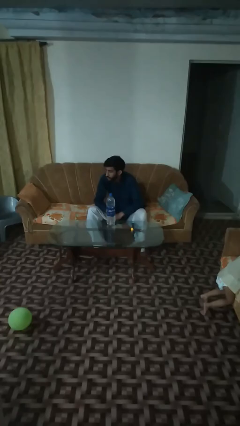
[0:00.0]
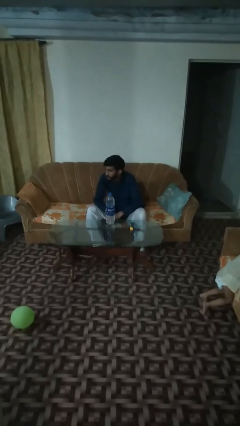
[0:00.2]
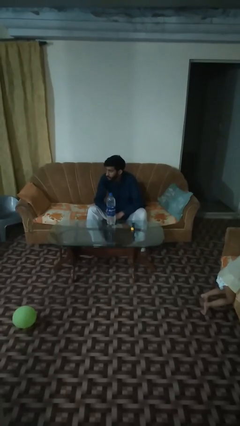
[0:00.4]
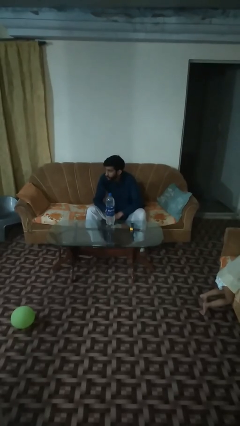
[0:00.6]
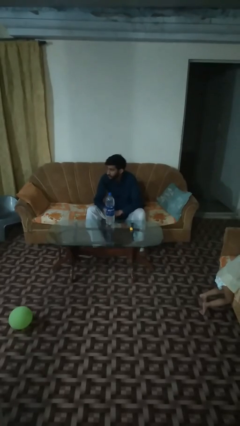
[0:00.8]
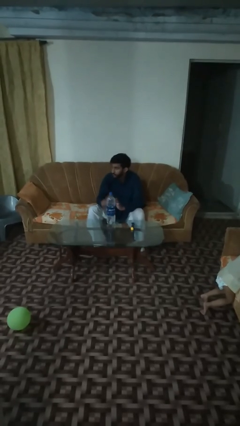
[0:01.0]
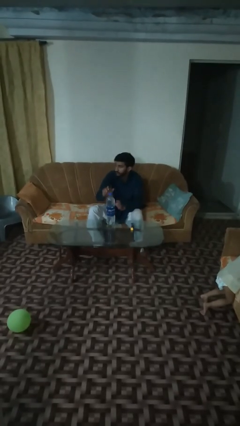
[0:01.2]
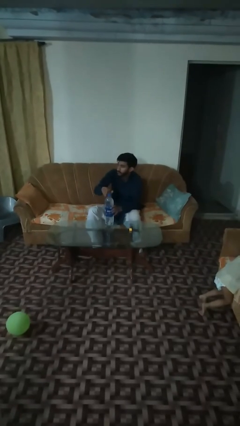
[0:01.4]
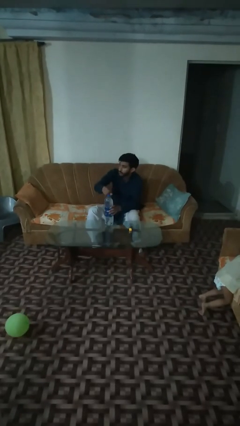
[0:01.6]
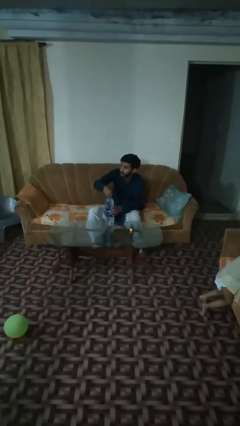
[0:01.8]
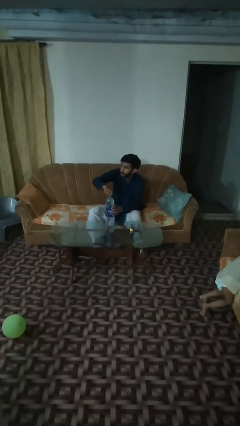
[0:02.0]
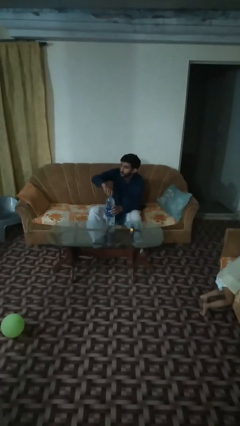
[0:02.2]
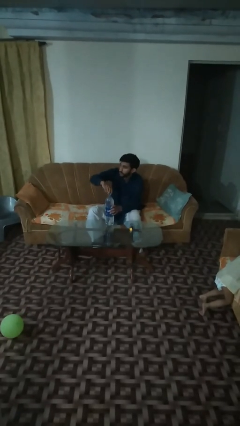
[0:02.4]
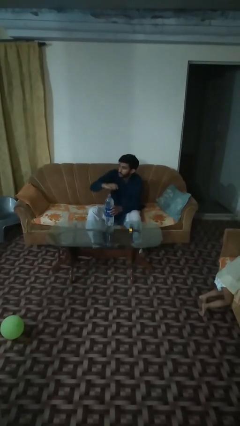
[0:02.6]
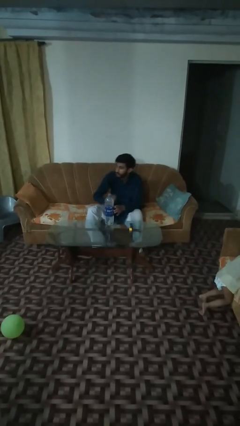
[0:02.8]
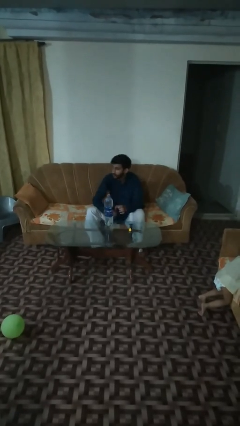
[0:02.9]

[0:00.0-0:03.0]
person unscrews lid from bottle

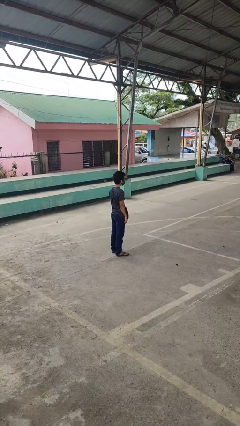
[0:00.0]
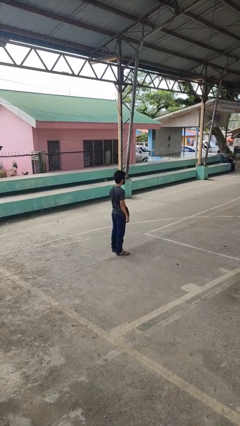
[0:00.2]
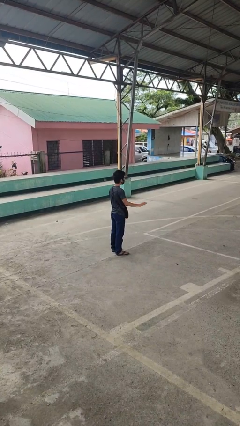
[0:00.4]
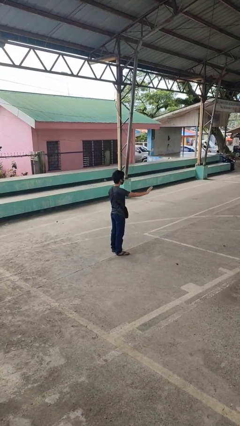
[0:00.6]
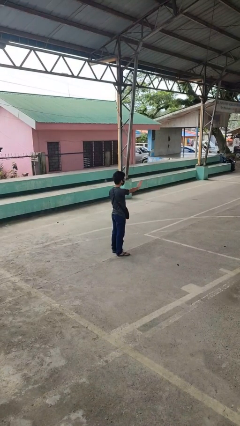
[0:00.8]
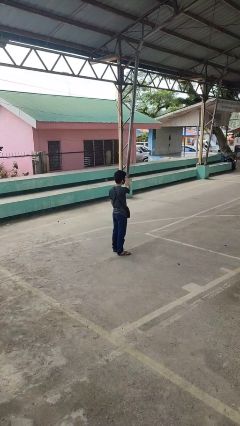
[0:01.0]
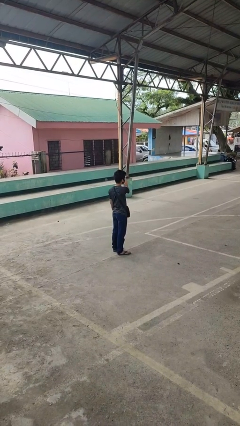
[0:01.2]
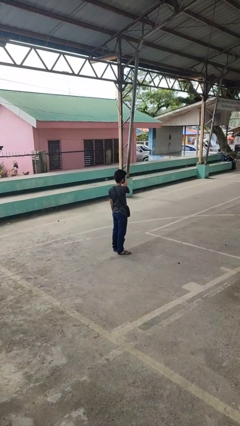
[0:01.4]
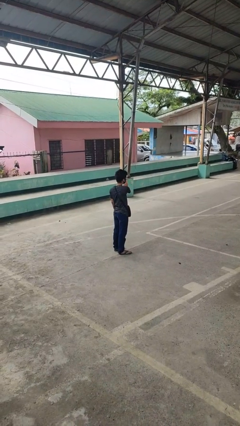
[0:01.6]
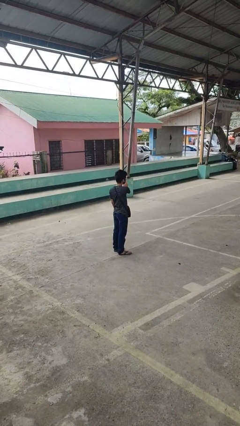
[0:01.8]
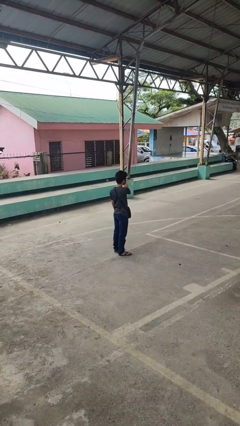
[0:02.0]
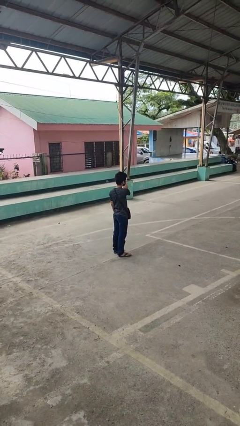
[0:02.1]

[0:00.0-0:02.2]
person gestures swipe left

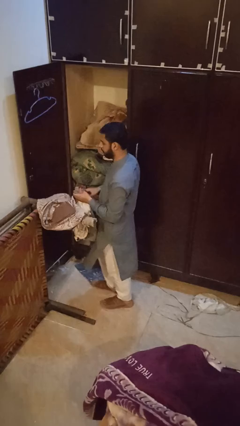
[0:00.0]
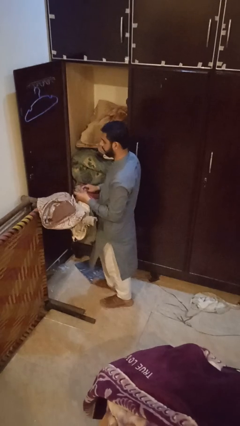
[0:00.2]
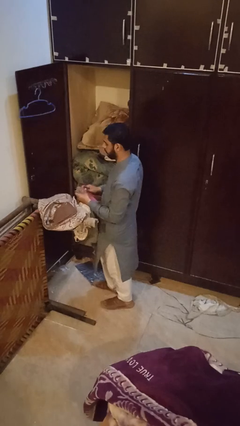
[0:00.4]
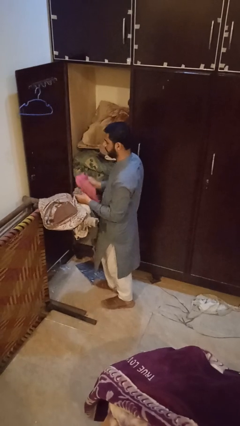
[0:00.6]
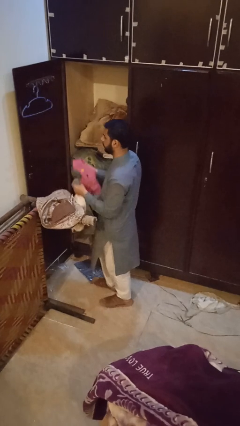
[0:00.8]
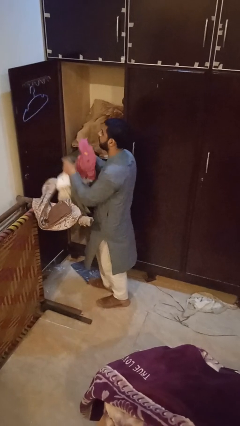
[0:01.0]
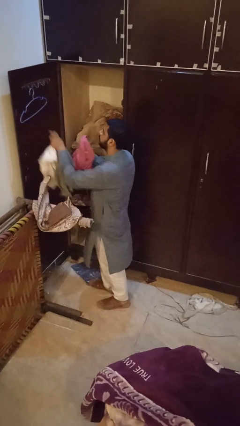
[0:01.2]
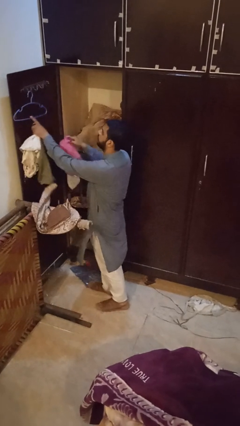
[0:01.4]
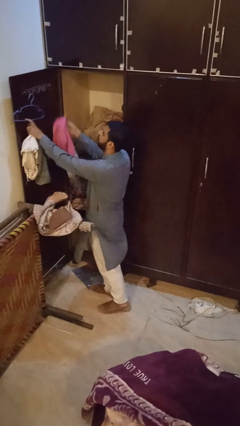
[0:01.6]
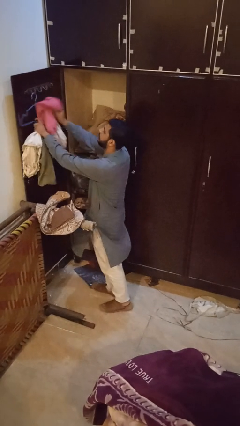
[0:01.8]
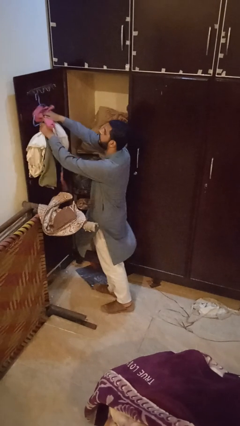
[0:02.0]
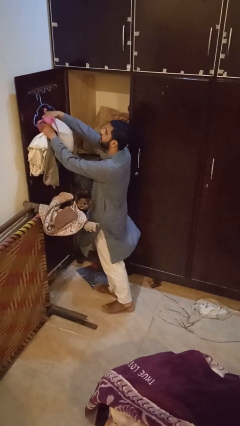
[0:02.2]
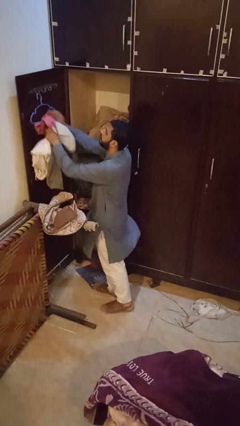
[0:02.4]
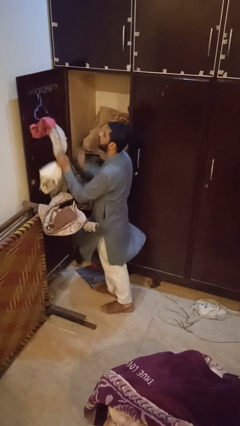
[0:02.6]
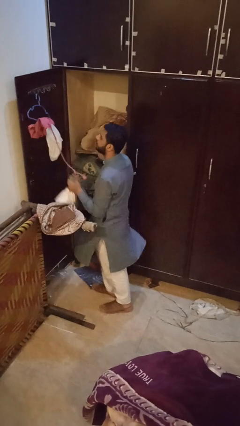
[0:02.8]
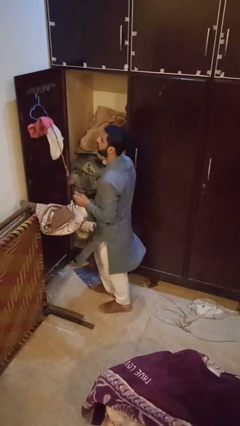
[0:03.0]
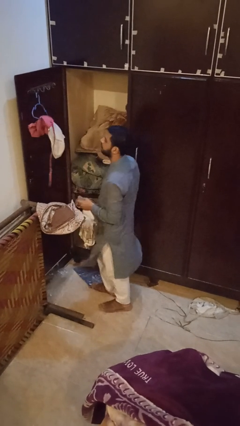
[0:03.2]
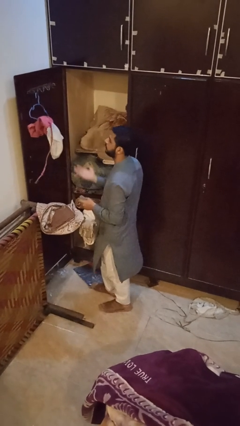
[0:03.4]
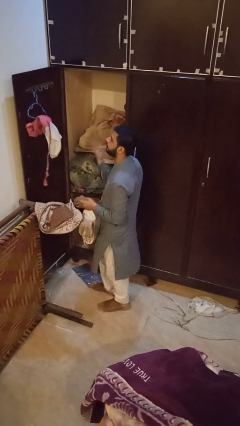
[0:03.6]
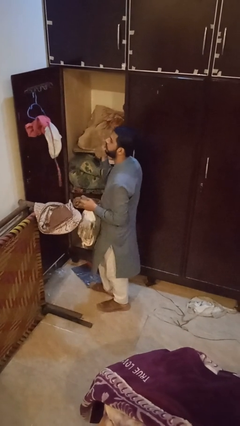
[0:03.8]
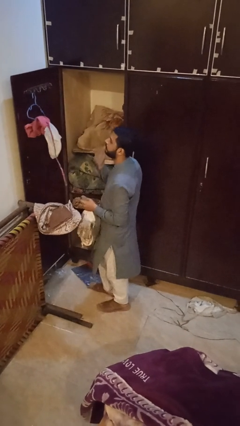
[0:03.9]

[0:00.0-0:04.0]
person puts clothes into closet

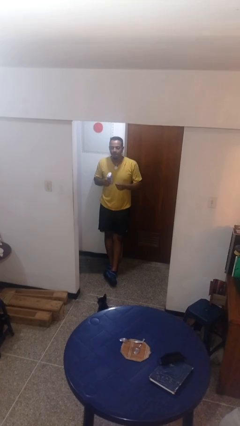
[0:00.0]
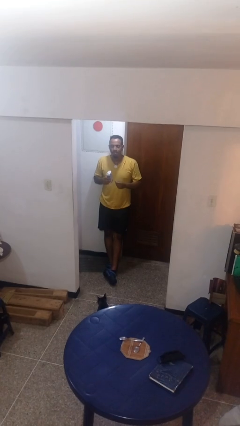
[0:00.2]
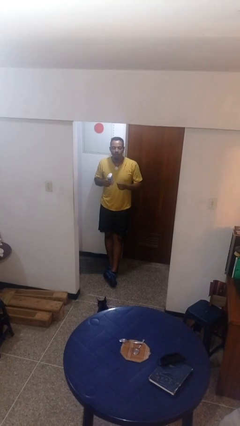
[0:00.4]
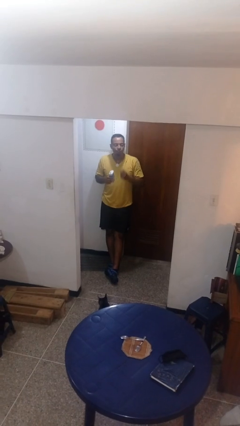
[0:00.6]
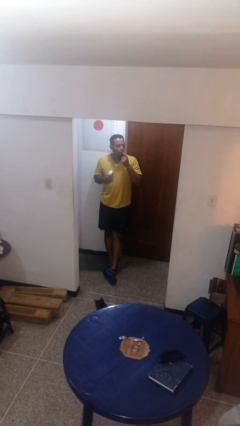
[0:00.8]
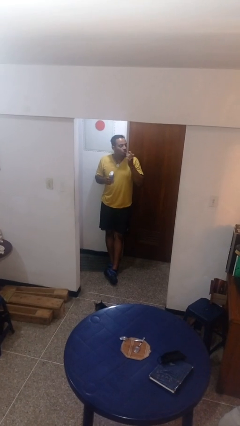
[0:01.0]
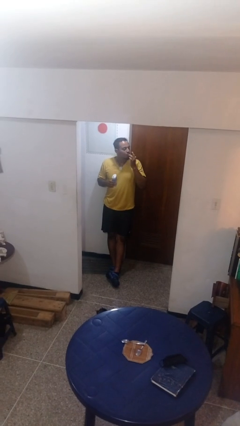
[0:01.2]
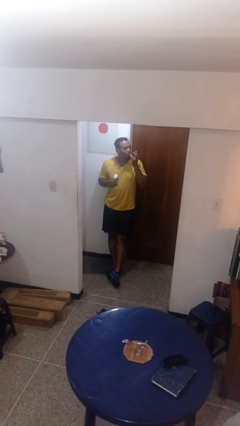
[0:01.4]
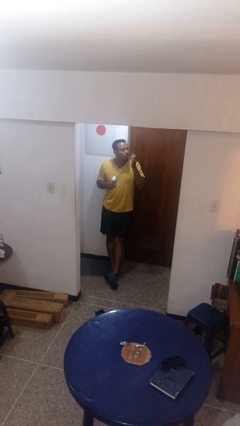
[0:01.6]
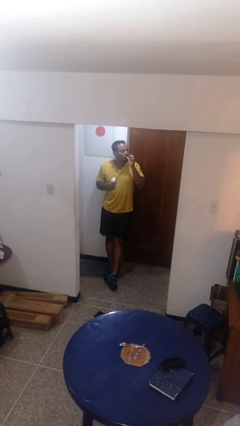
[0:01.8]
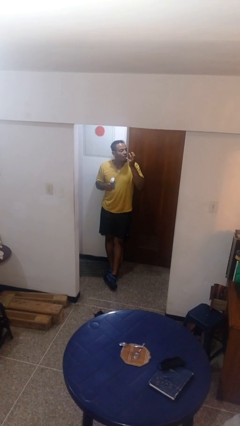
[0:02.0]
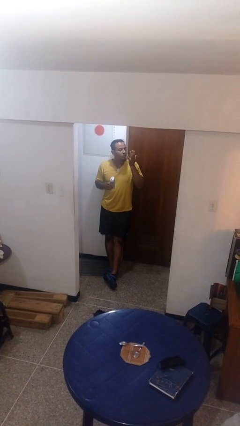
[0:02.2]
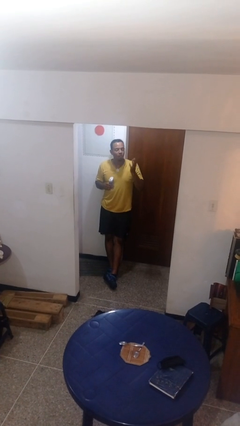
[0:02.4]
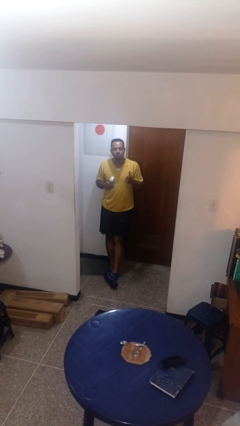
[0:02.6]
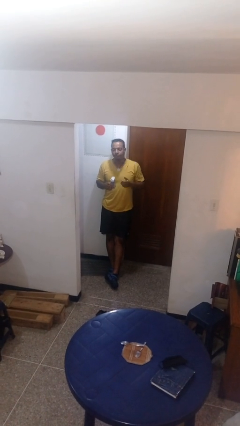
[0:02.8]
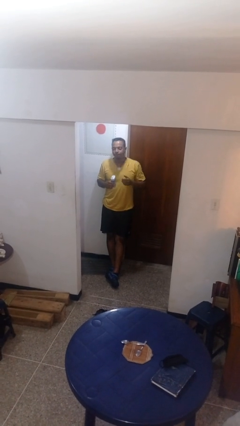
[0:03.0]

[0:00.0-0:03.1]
person licks fingers

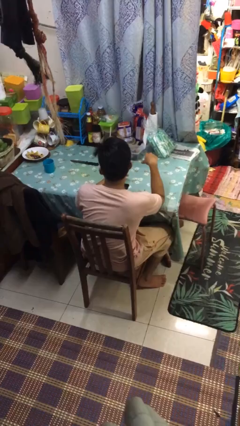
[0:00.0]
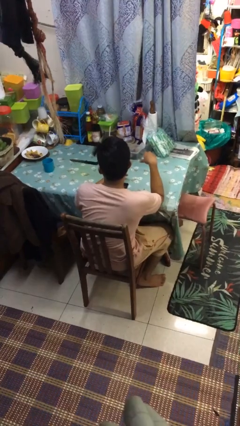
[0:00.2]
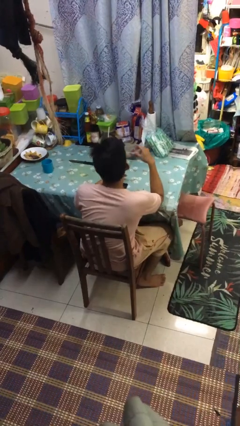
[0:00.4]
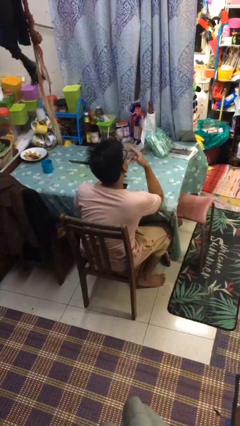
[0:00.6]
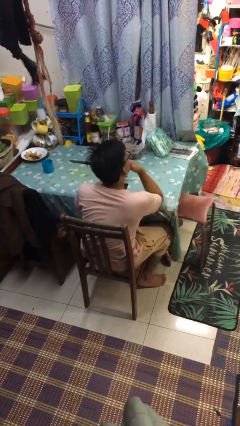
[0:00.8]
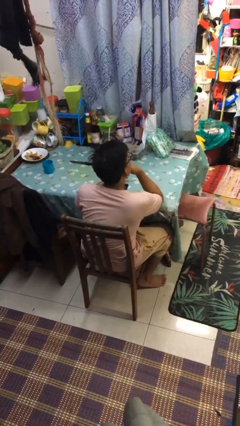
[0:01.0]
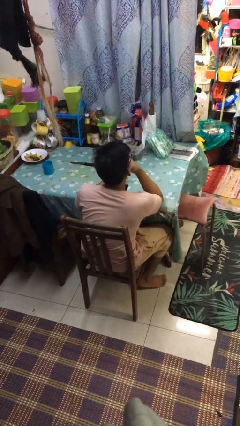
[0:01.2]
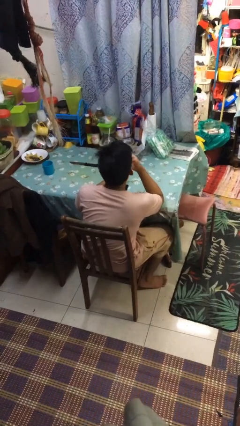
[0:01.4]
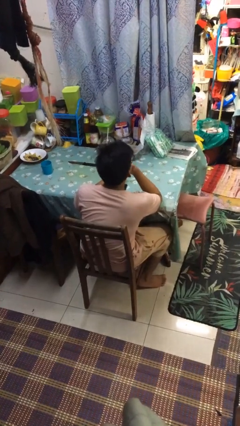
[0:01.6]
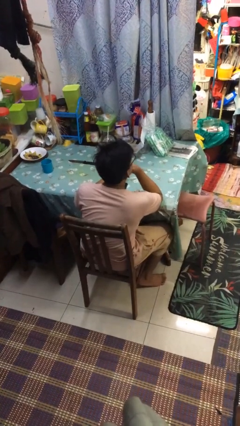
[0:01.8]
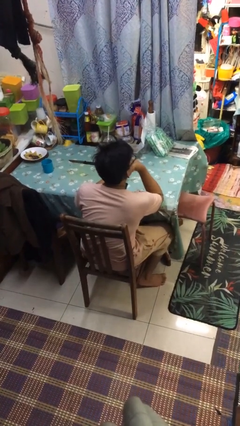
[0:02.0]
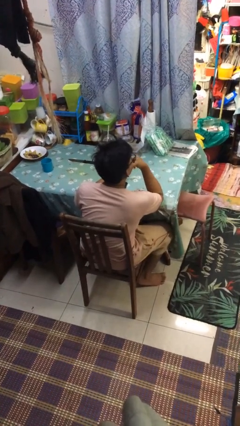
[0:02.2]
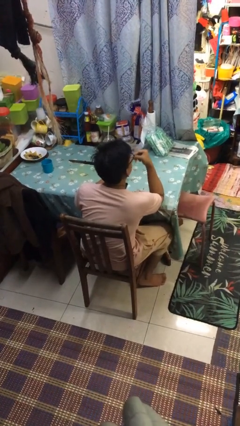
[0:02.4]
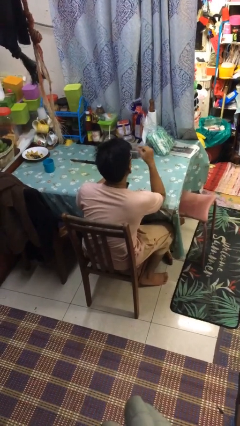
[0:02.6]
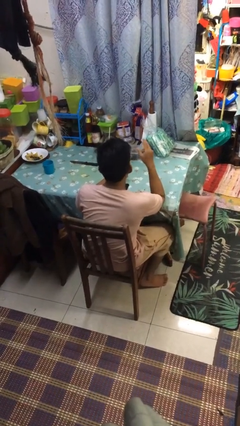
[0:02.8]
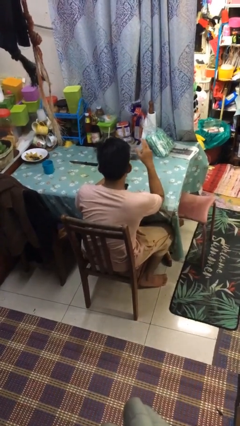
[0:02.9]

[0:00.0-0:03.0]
person strokes chin

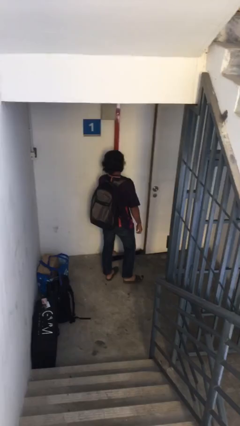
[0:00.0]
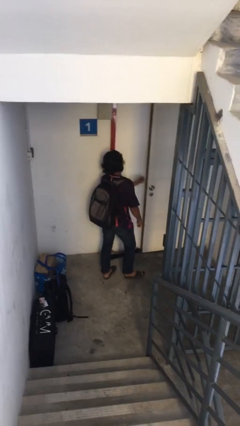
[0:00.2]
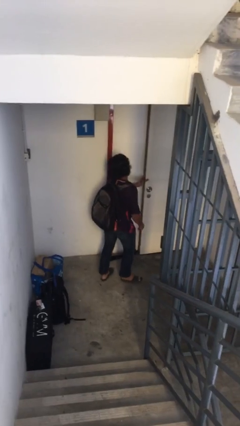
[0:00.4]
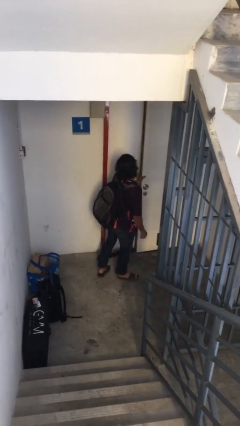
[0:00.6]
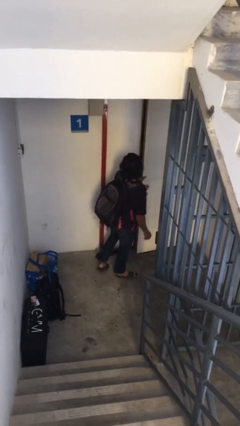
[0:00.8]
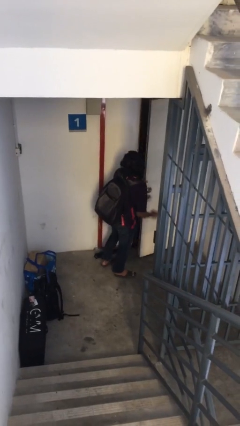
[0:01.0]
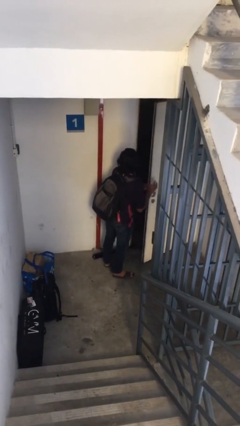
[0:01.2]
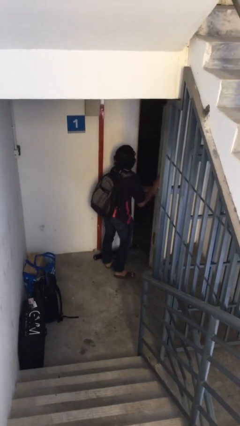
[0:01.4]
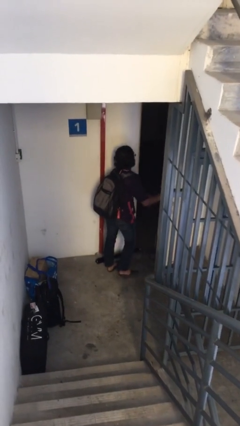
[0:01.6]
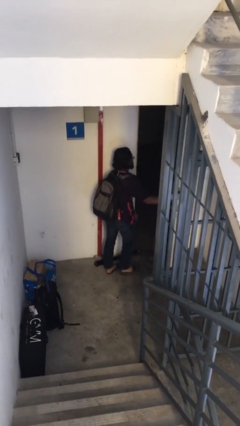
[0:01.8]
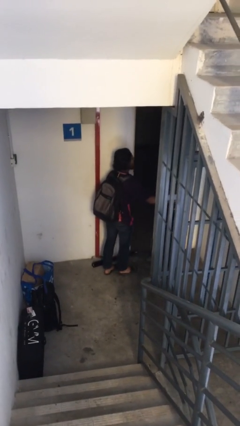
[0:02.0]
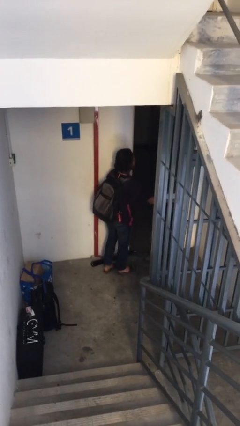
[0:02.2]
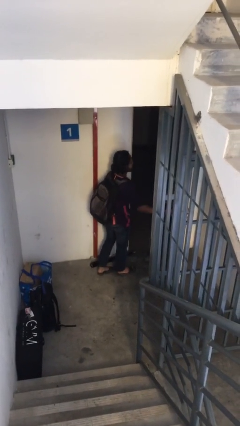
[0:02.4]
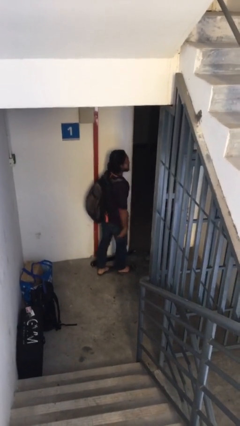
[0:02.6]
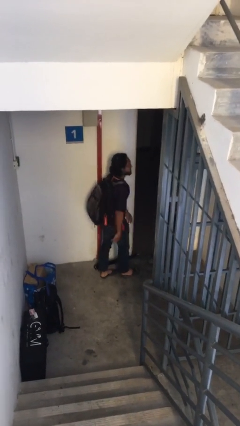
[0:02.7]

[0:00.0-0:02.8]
person opens facility door
